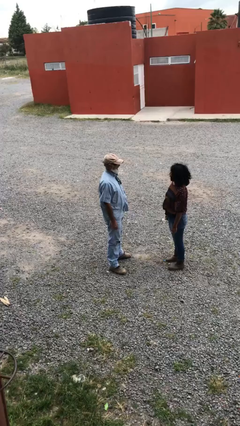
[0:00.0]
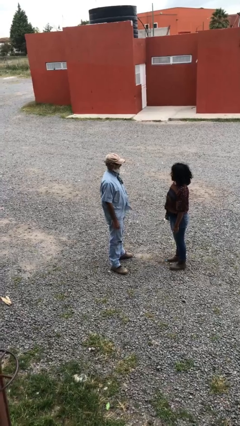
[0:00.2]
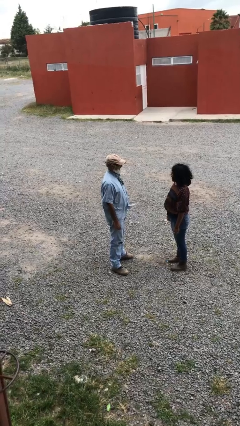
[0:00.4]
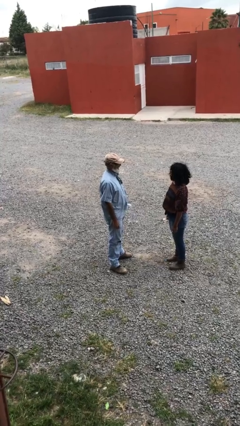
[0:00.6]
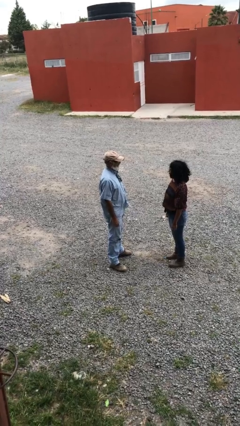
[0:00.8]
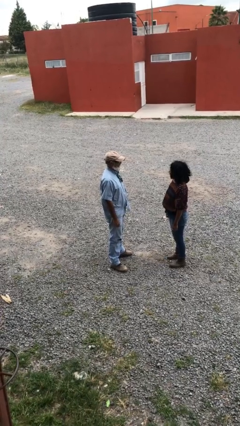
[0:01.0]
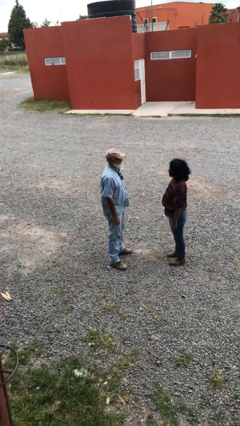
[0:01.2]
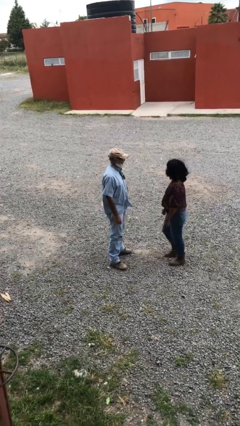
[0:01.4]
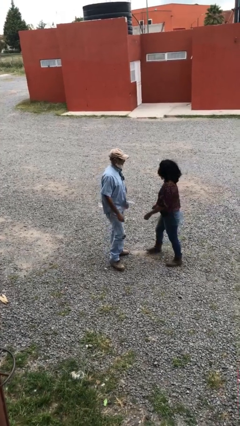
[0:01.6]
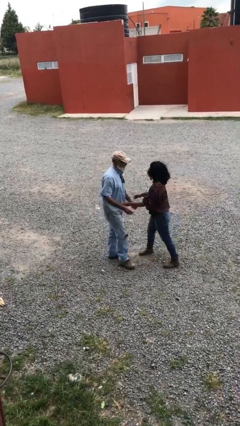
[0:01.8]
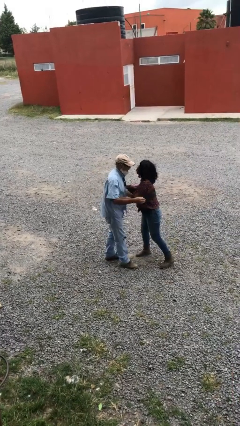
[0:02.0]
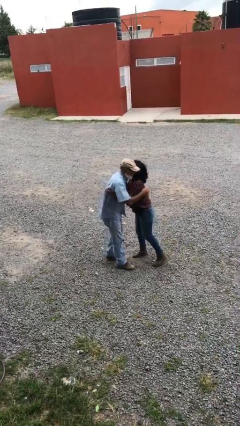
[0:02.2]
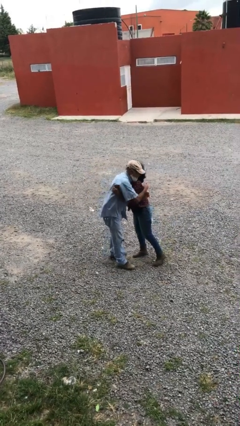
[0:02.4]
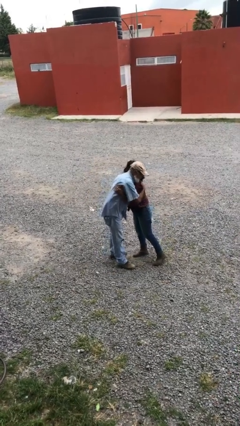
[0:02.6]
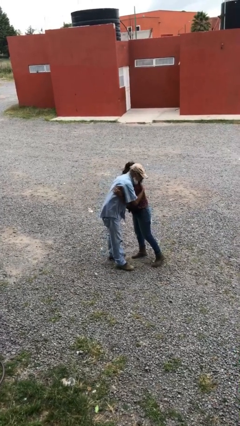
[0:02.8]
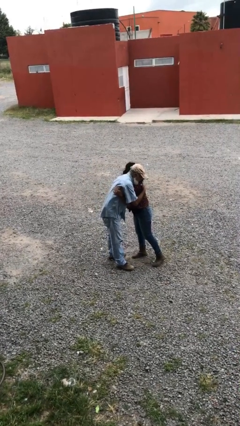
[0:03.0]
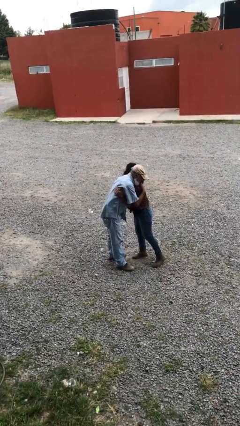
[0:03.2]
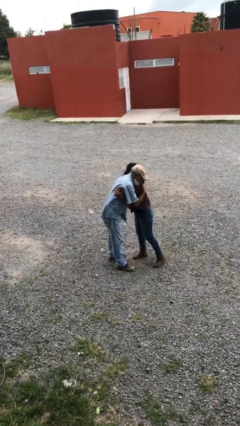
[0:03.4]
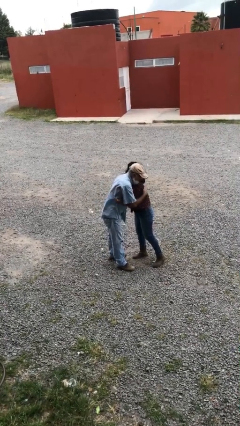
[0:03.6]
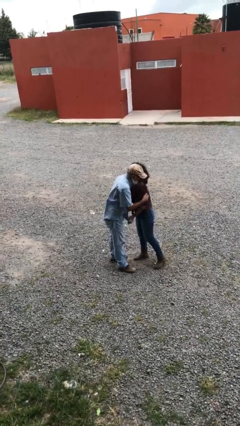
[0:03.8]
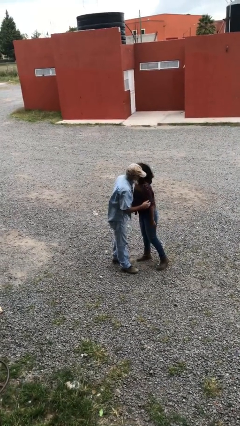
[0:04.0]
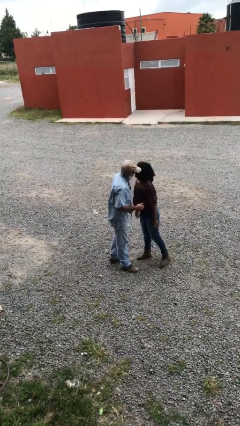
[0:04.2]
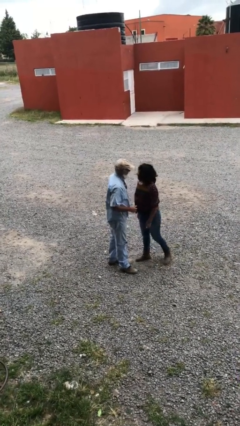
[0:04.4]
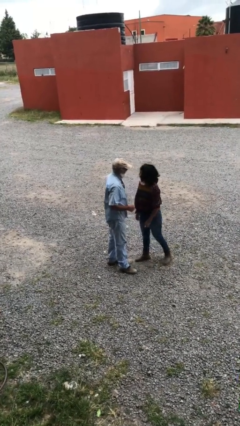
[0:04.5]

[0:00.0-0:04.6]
person embraces person

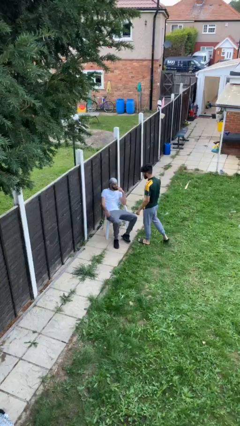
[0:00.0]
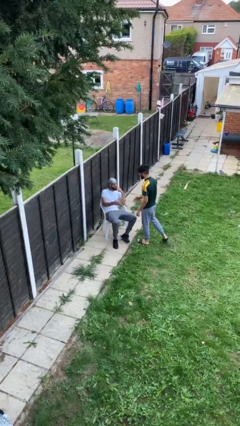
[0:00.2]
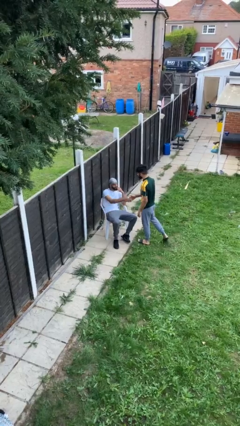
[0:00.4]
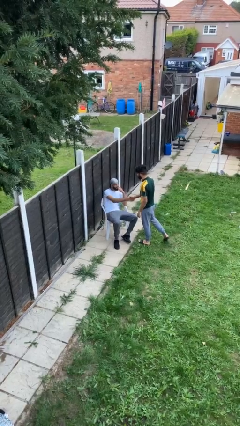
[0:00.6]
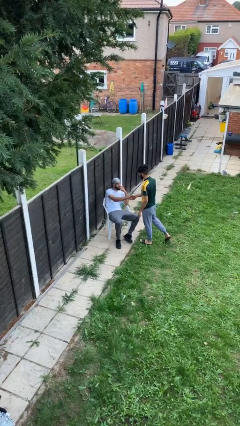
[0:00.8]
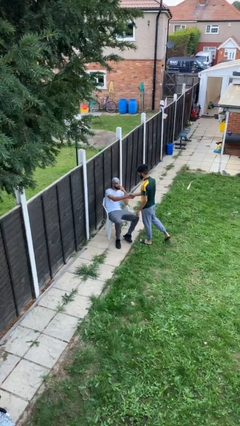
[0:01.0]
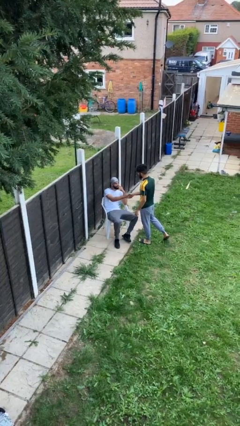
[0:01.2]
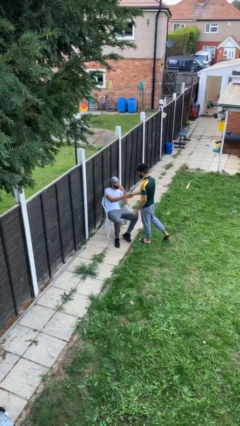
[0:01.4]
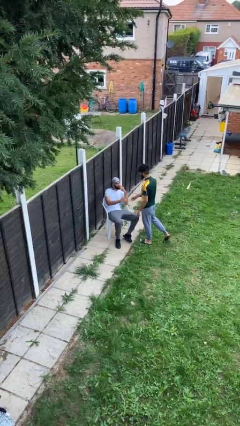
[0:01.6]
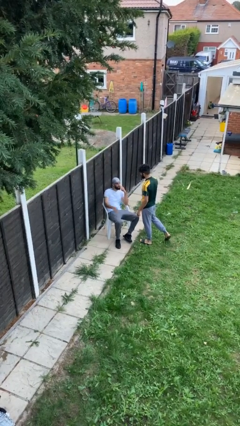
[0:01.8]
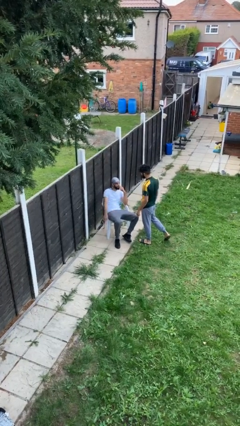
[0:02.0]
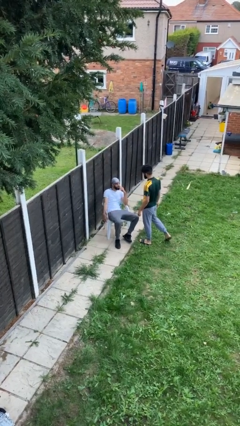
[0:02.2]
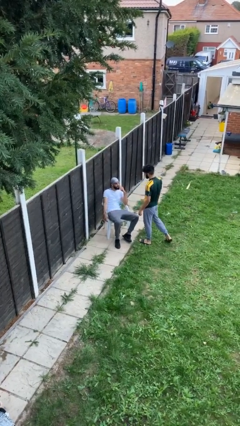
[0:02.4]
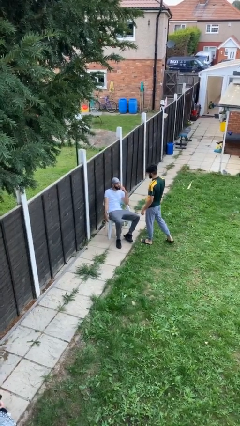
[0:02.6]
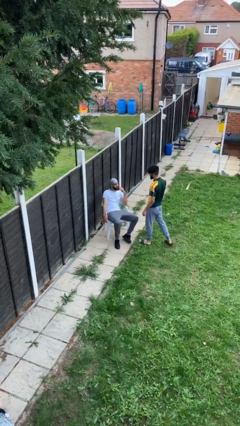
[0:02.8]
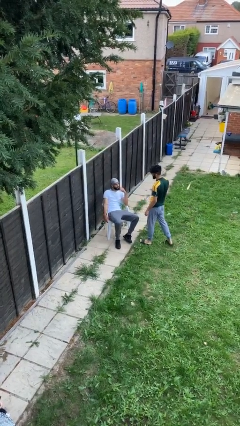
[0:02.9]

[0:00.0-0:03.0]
person shakes hand

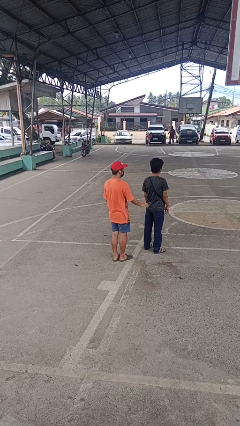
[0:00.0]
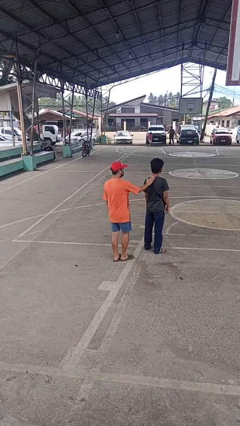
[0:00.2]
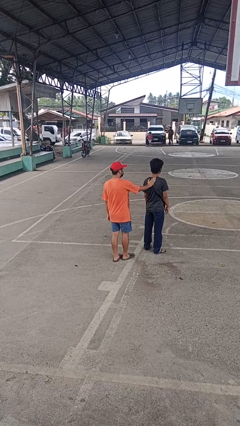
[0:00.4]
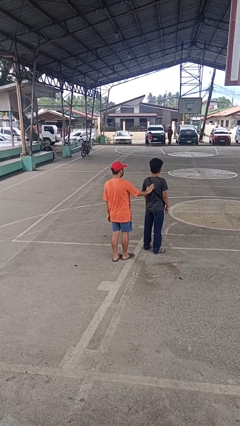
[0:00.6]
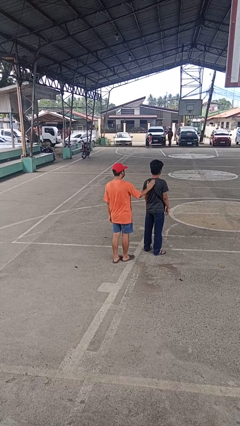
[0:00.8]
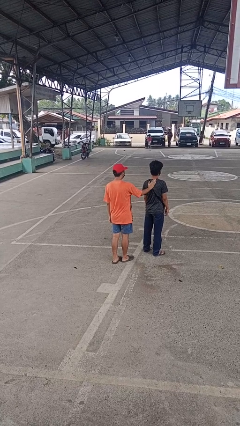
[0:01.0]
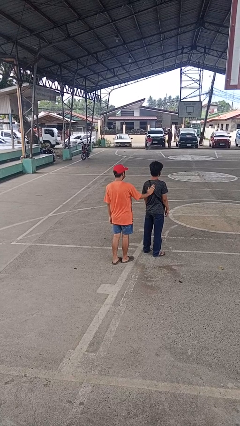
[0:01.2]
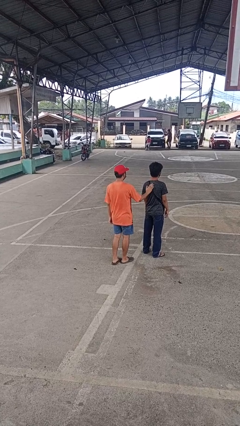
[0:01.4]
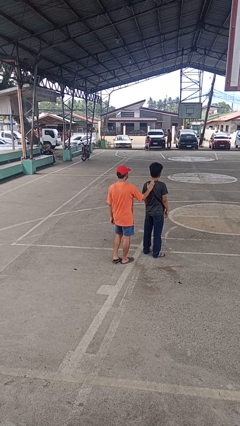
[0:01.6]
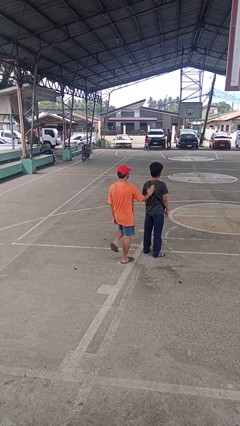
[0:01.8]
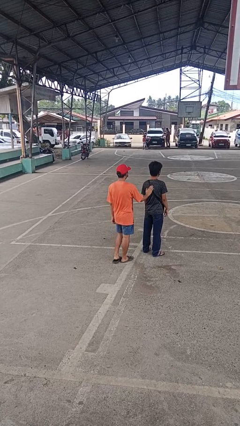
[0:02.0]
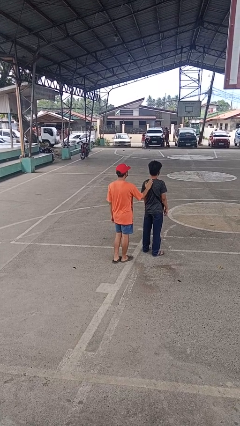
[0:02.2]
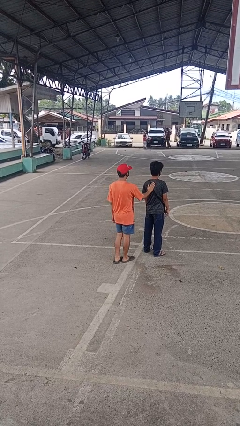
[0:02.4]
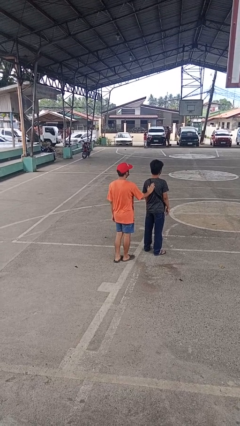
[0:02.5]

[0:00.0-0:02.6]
person touches back of person

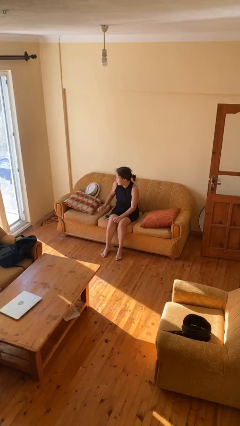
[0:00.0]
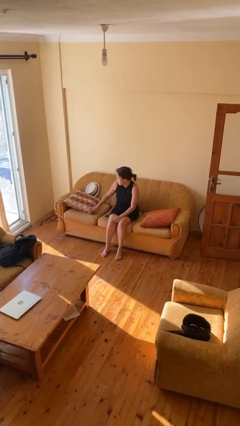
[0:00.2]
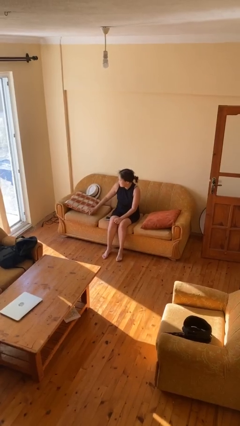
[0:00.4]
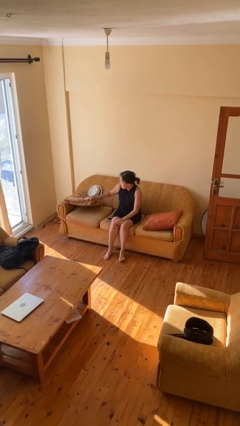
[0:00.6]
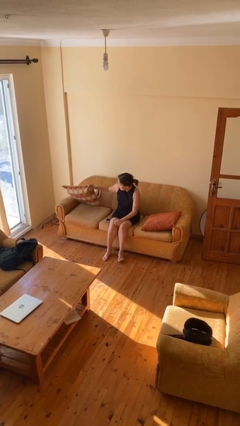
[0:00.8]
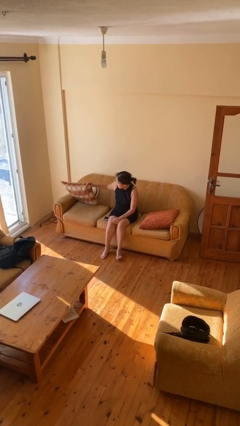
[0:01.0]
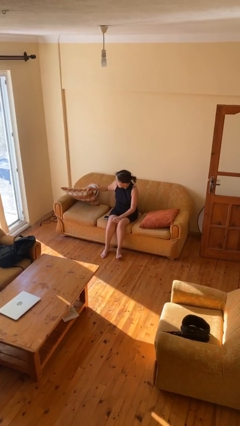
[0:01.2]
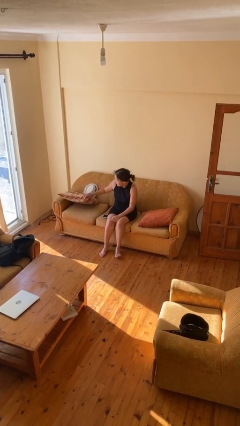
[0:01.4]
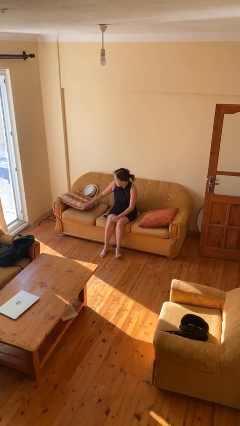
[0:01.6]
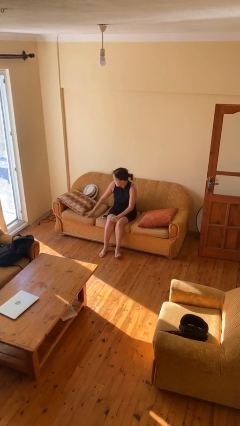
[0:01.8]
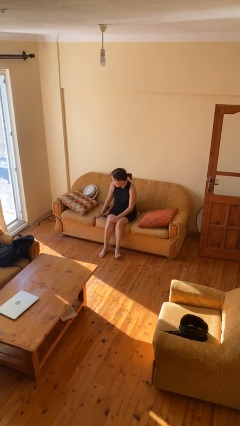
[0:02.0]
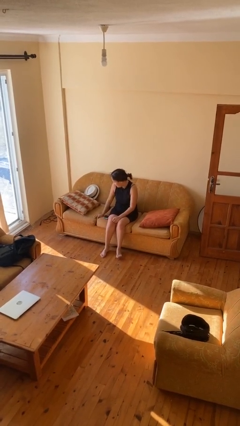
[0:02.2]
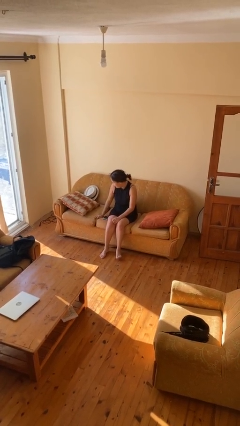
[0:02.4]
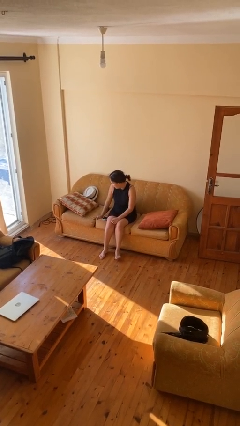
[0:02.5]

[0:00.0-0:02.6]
person searches in couch

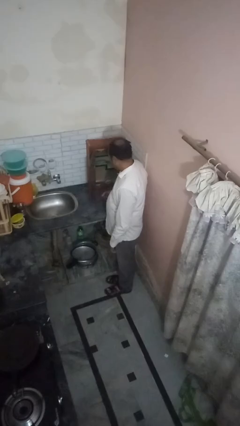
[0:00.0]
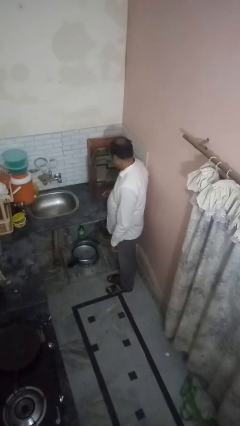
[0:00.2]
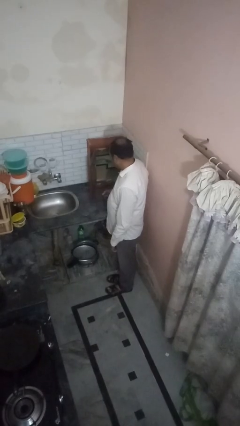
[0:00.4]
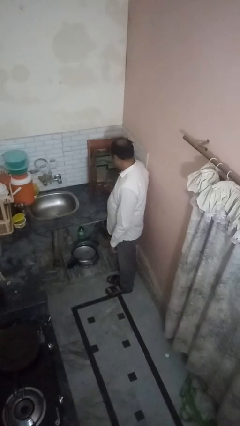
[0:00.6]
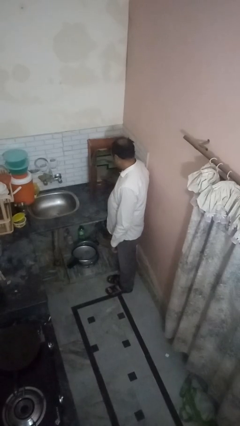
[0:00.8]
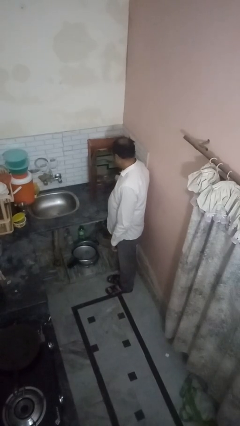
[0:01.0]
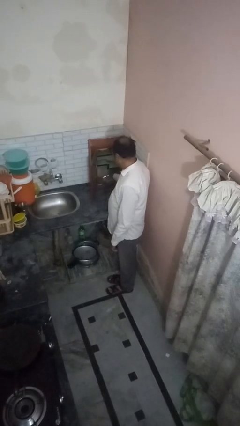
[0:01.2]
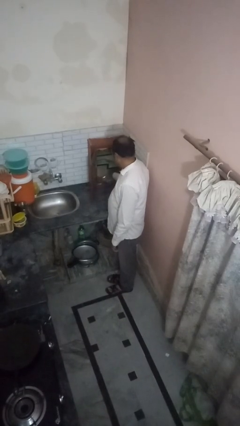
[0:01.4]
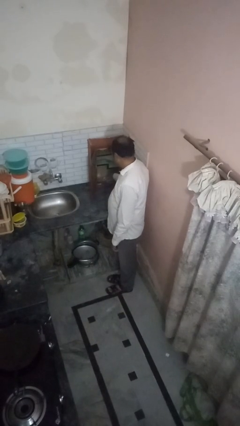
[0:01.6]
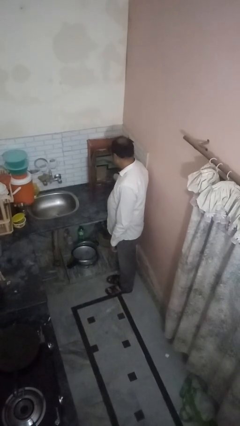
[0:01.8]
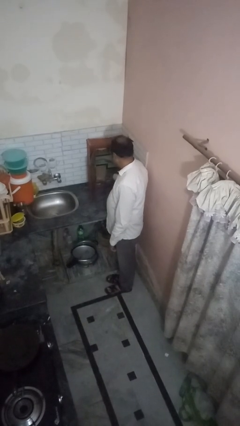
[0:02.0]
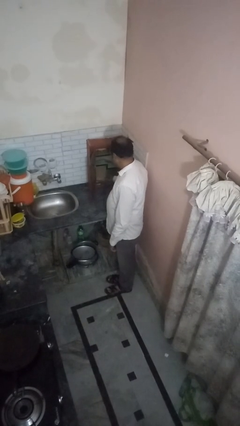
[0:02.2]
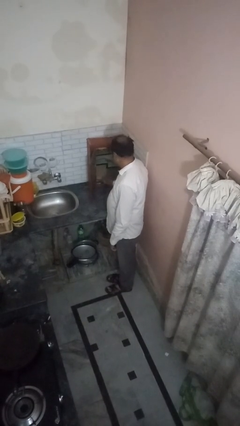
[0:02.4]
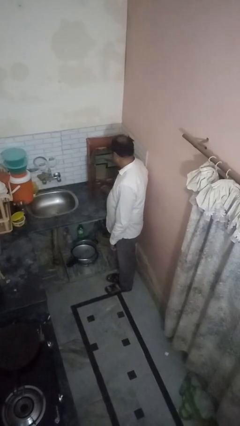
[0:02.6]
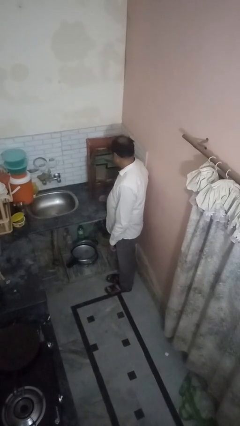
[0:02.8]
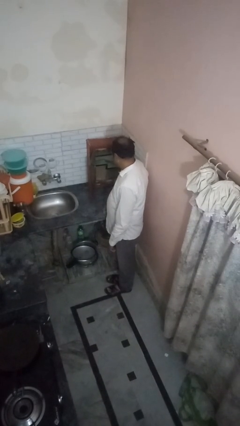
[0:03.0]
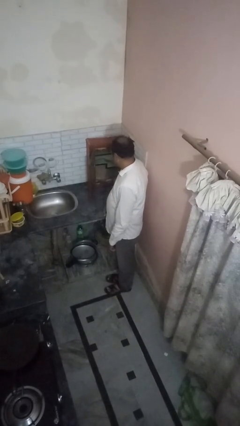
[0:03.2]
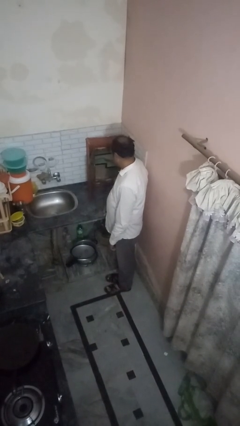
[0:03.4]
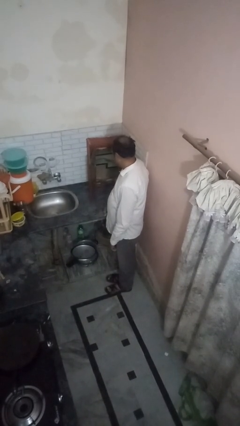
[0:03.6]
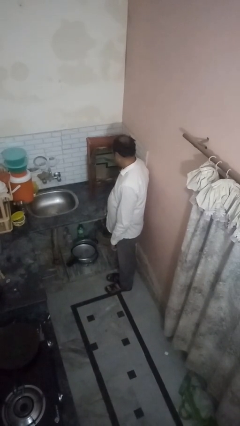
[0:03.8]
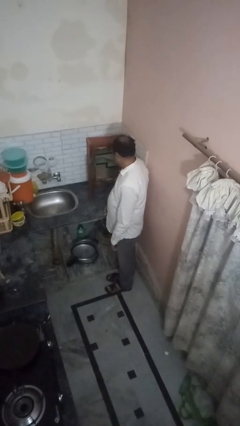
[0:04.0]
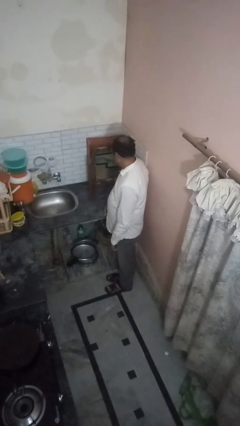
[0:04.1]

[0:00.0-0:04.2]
person puts object into kitchen drawer

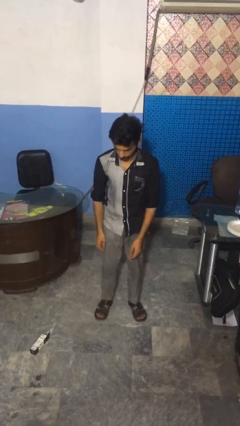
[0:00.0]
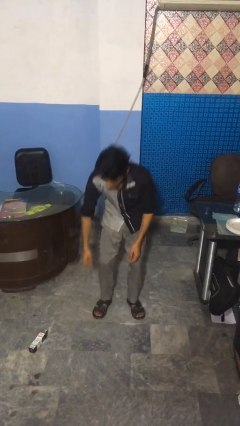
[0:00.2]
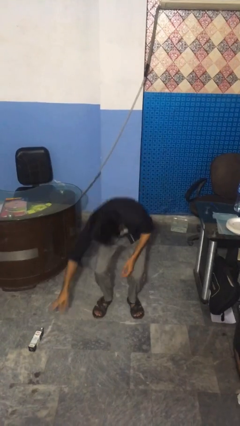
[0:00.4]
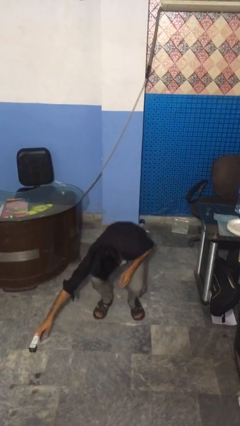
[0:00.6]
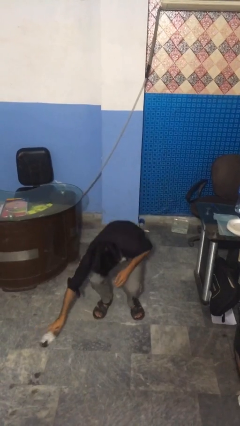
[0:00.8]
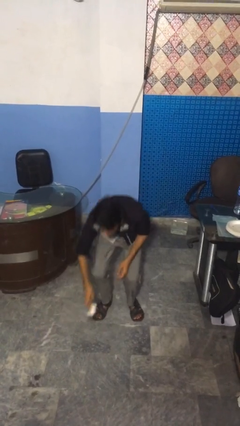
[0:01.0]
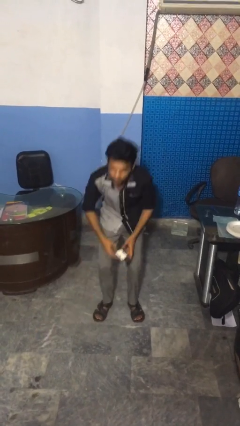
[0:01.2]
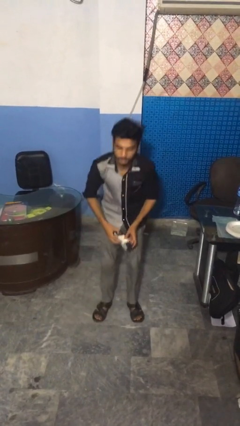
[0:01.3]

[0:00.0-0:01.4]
person picks up object from floor
